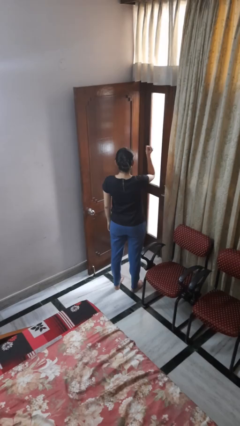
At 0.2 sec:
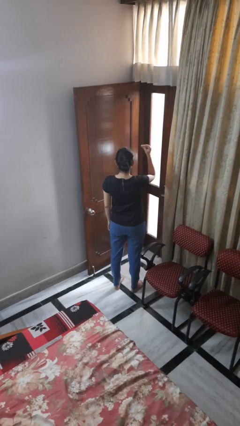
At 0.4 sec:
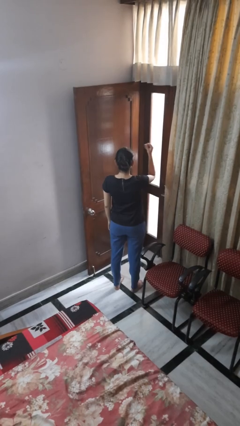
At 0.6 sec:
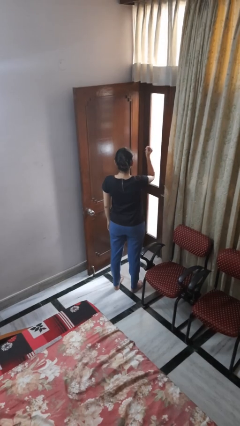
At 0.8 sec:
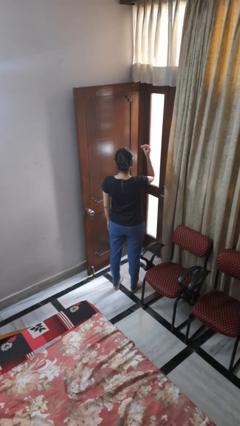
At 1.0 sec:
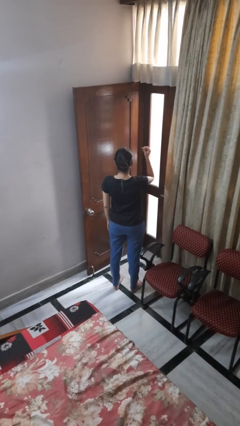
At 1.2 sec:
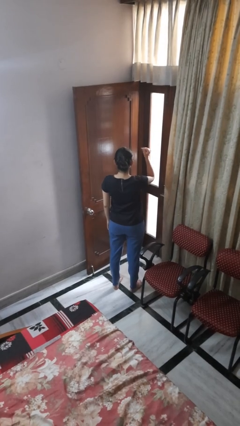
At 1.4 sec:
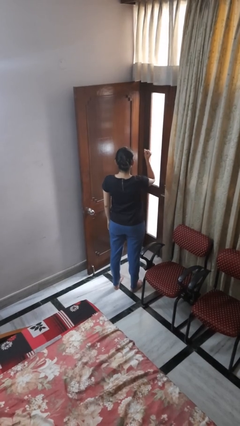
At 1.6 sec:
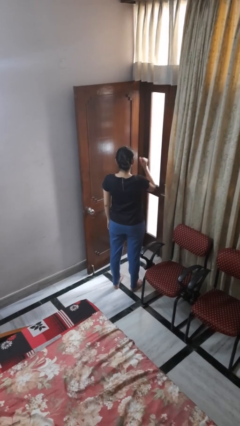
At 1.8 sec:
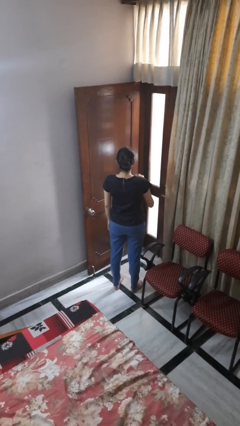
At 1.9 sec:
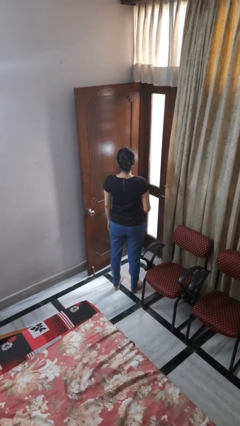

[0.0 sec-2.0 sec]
person snaps fingers

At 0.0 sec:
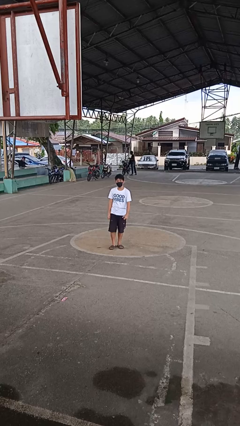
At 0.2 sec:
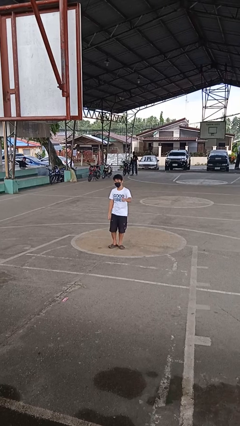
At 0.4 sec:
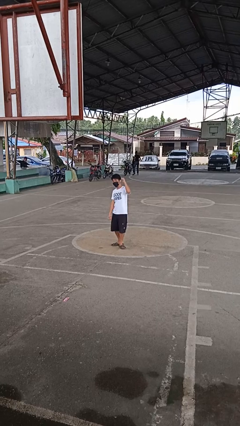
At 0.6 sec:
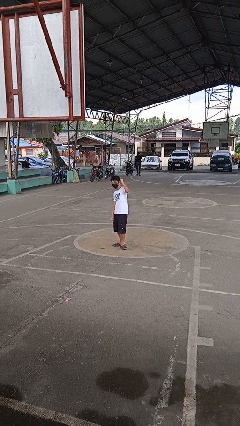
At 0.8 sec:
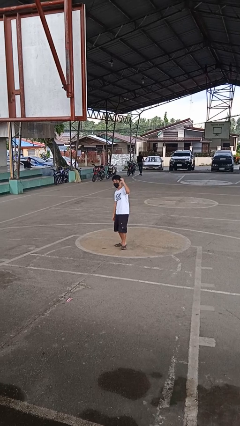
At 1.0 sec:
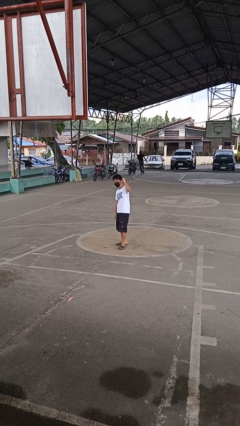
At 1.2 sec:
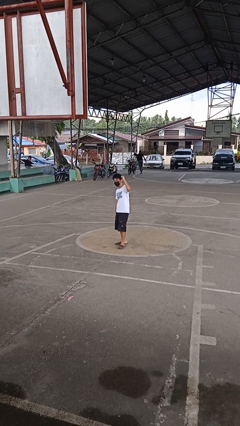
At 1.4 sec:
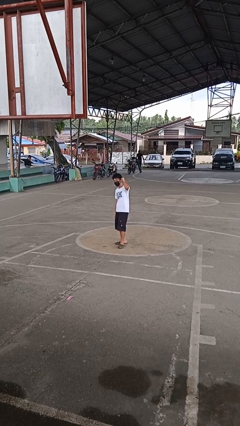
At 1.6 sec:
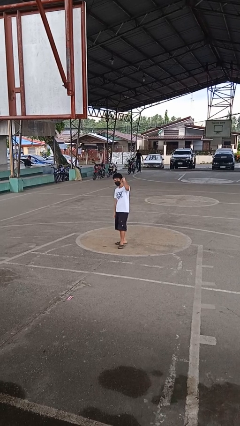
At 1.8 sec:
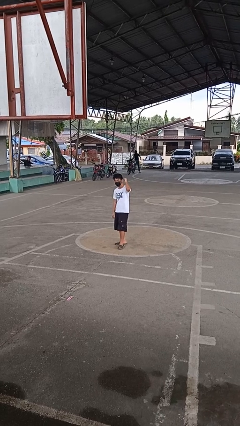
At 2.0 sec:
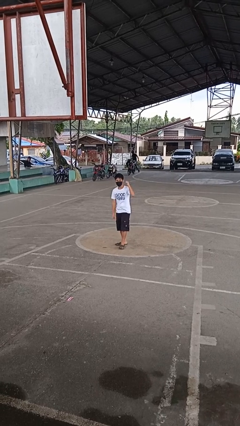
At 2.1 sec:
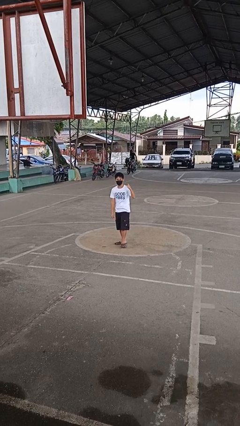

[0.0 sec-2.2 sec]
person gestures behind me

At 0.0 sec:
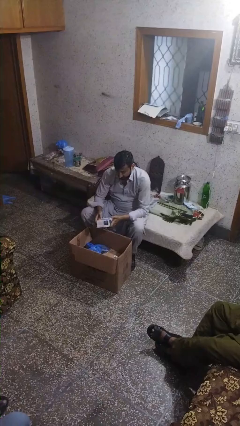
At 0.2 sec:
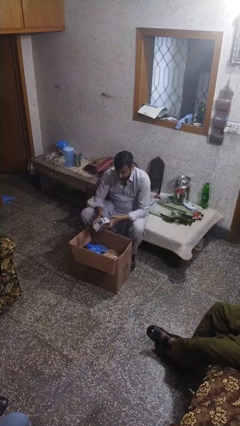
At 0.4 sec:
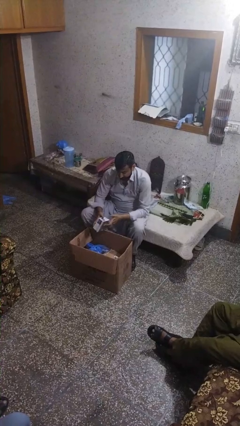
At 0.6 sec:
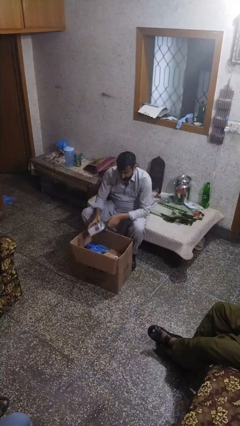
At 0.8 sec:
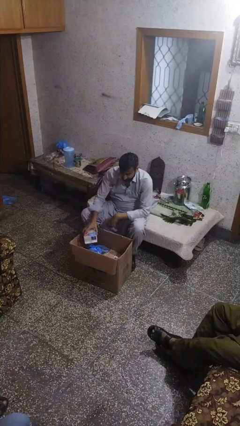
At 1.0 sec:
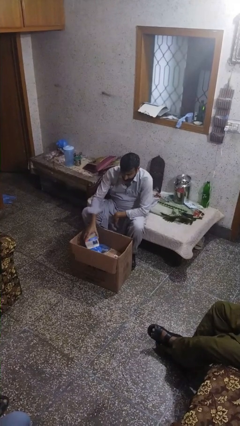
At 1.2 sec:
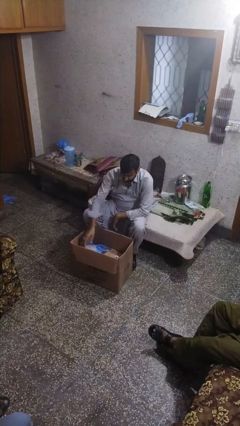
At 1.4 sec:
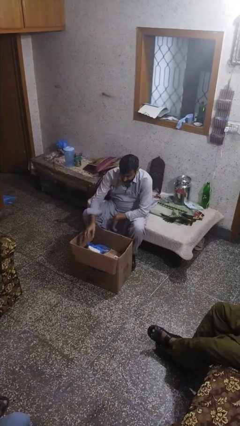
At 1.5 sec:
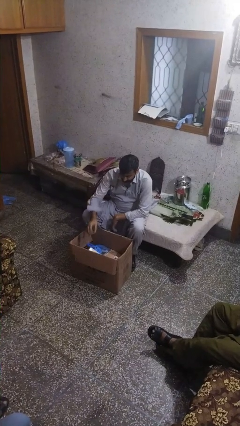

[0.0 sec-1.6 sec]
person puts object into box

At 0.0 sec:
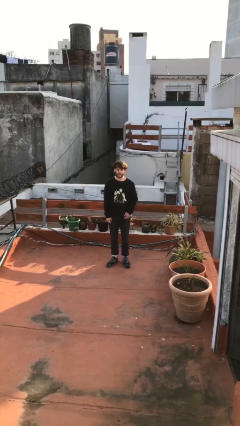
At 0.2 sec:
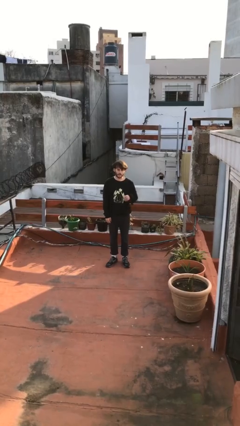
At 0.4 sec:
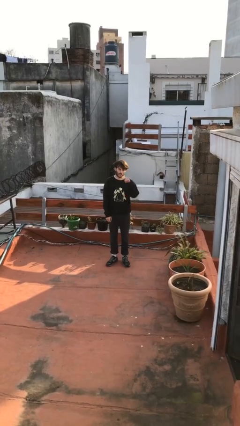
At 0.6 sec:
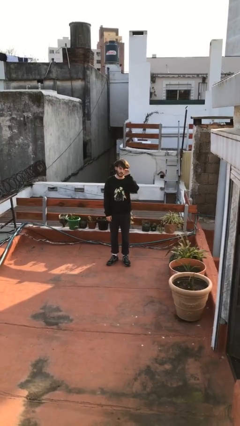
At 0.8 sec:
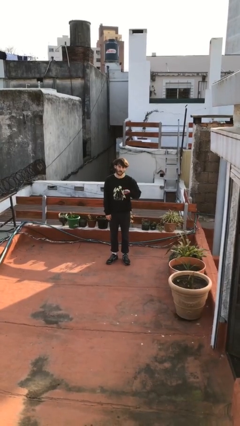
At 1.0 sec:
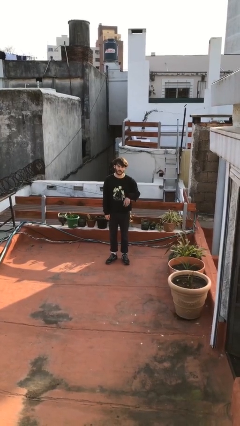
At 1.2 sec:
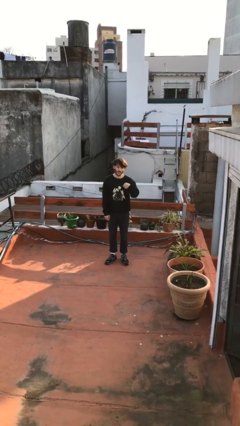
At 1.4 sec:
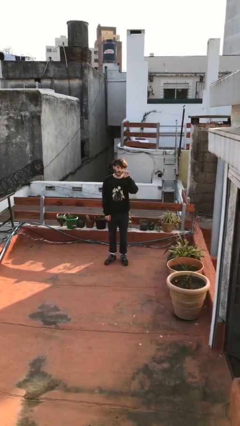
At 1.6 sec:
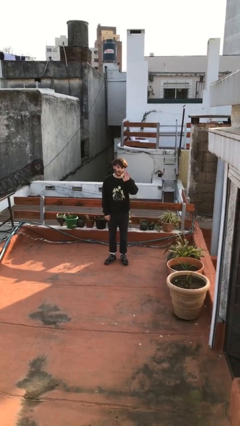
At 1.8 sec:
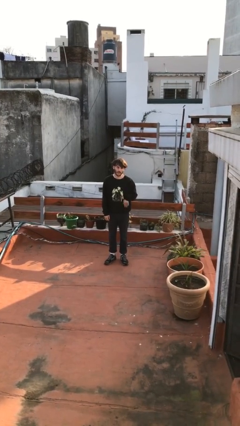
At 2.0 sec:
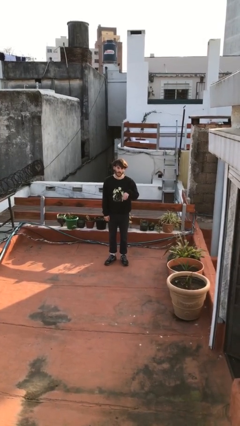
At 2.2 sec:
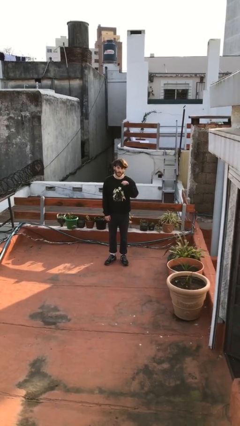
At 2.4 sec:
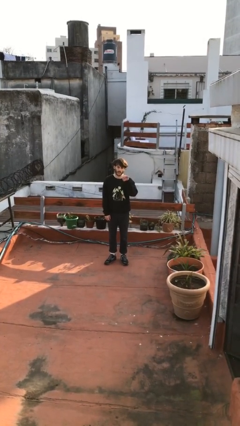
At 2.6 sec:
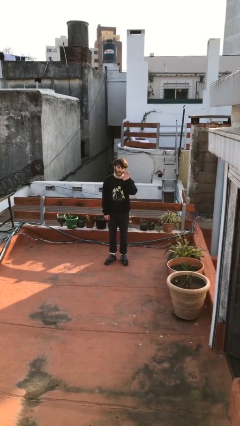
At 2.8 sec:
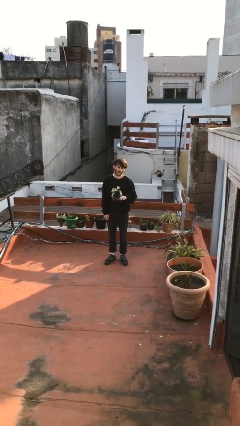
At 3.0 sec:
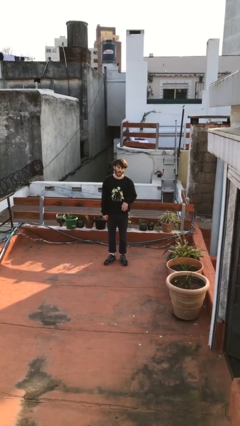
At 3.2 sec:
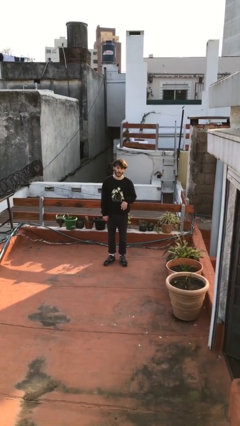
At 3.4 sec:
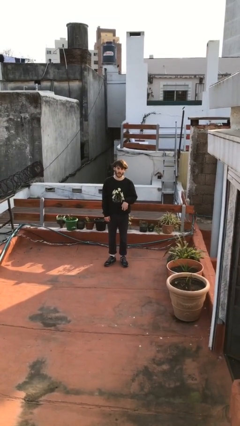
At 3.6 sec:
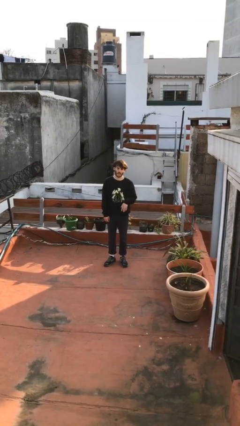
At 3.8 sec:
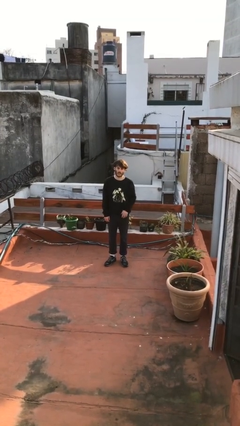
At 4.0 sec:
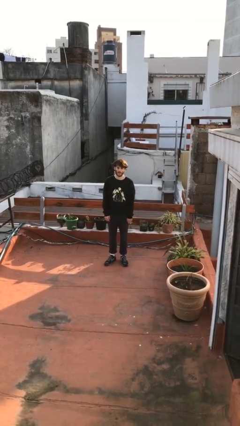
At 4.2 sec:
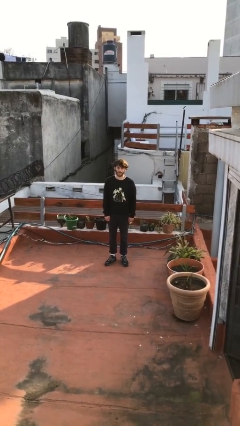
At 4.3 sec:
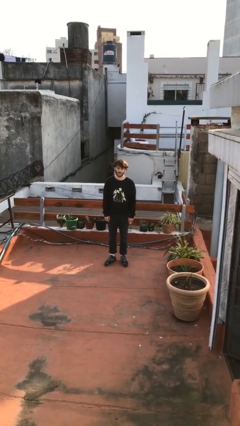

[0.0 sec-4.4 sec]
person gestures swipe down

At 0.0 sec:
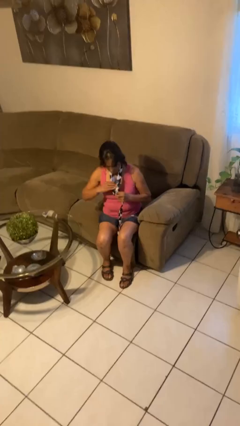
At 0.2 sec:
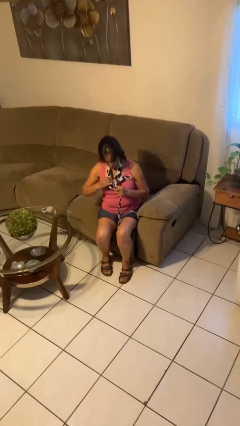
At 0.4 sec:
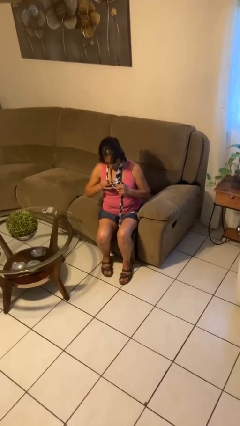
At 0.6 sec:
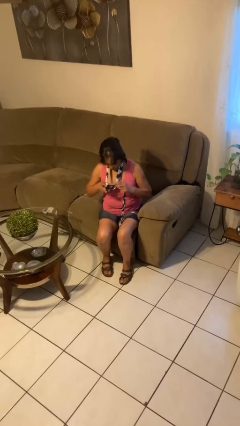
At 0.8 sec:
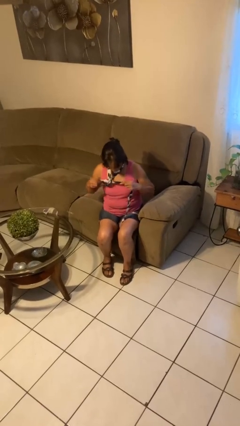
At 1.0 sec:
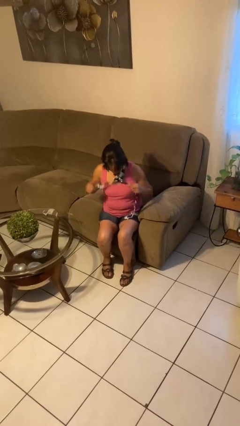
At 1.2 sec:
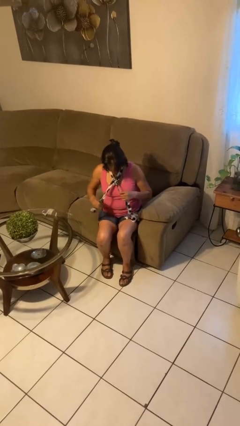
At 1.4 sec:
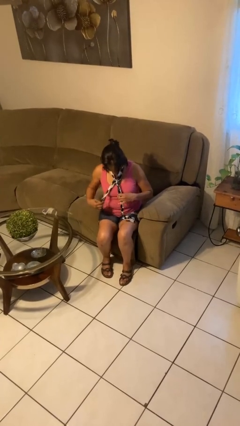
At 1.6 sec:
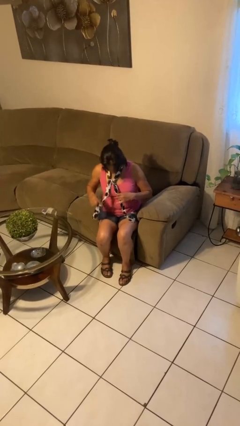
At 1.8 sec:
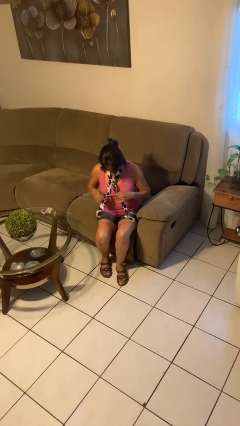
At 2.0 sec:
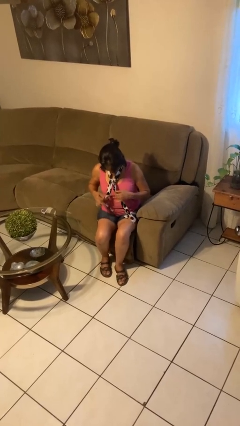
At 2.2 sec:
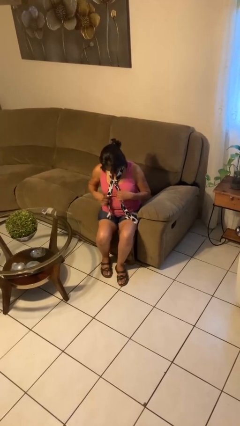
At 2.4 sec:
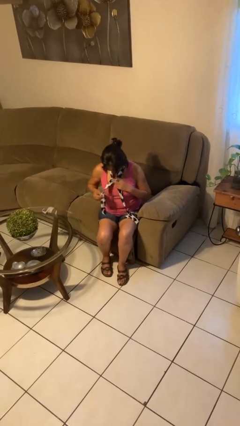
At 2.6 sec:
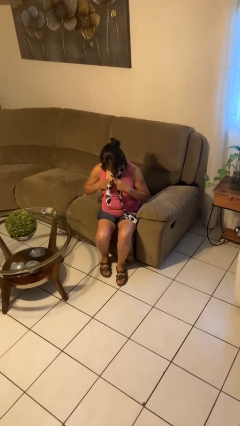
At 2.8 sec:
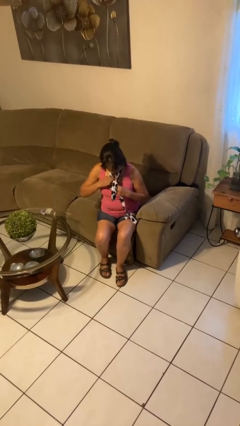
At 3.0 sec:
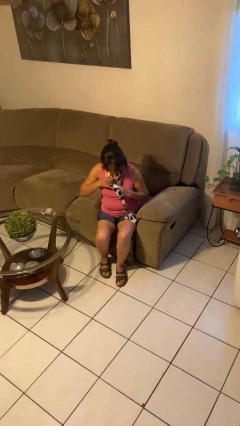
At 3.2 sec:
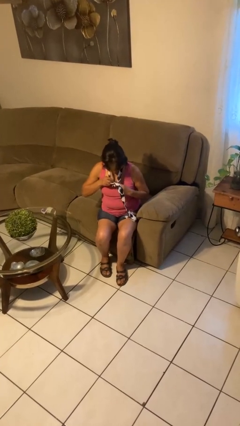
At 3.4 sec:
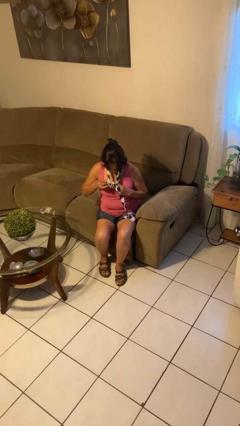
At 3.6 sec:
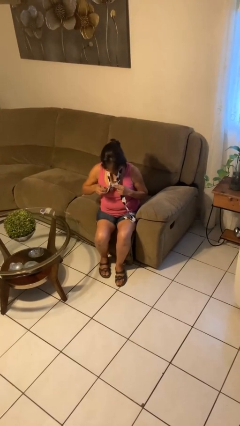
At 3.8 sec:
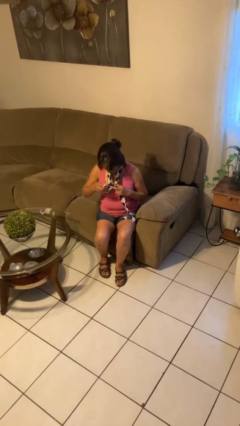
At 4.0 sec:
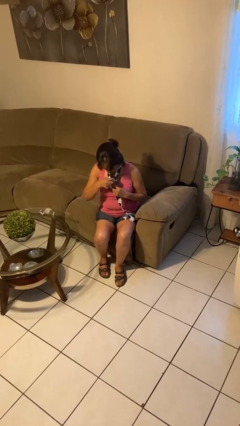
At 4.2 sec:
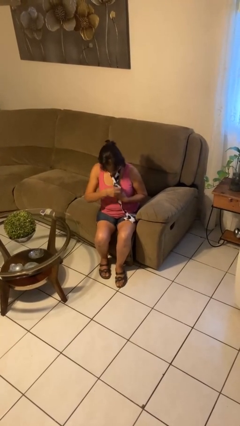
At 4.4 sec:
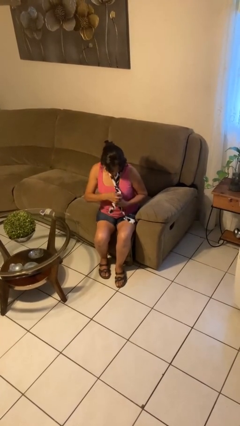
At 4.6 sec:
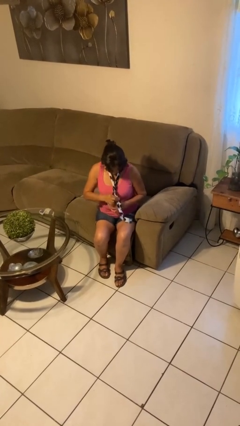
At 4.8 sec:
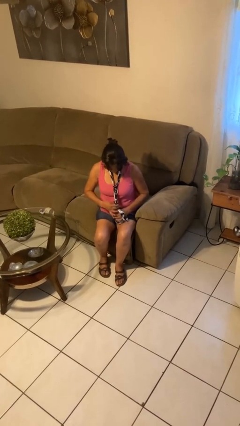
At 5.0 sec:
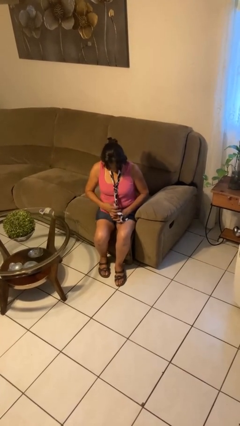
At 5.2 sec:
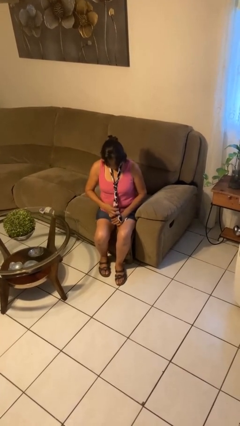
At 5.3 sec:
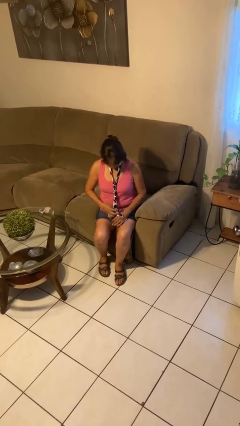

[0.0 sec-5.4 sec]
person puts on necktie

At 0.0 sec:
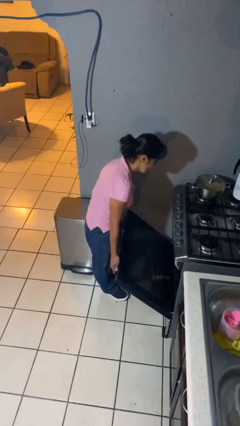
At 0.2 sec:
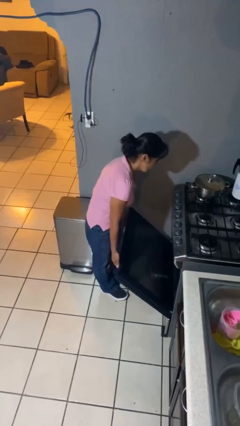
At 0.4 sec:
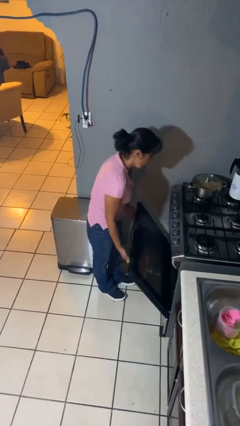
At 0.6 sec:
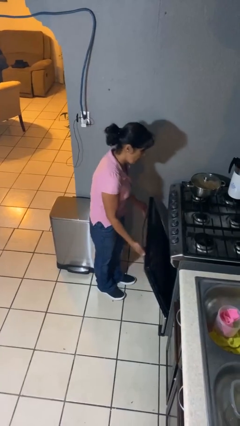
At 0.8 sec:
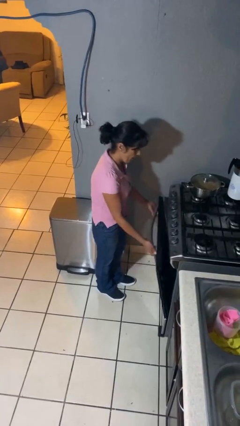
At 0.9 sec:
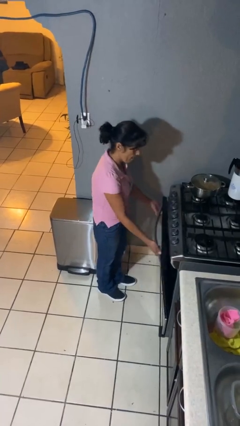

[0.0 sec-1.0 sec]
person closes oven door

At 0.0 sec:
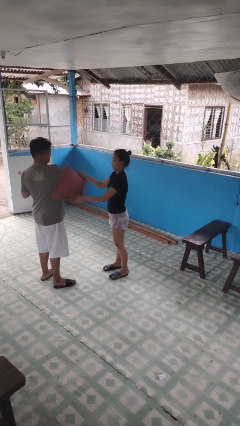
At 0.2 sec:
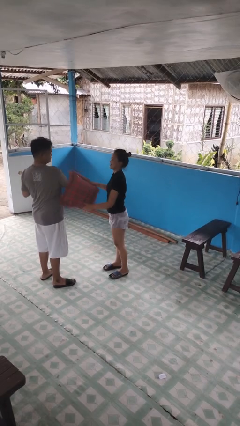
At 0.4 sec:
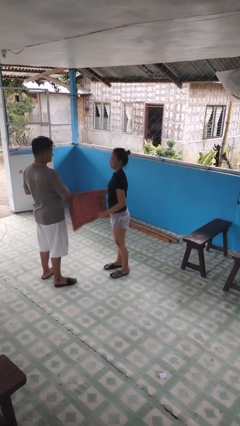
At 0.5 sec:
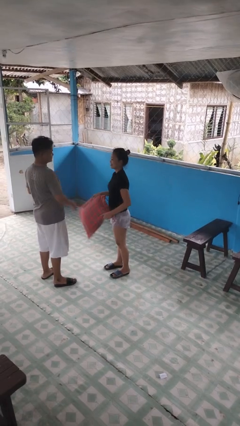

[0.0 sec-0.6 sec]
person hits person with pillow
